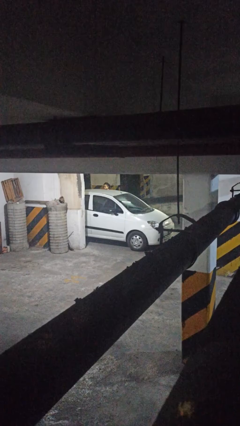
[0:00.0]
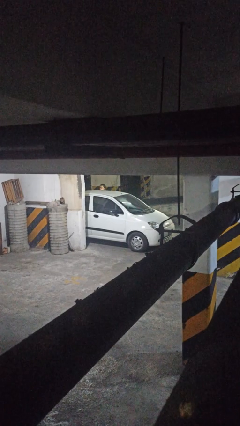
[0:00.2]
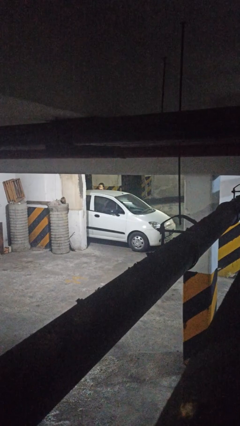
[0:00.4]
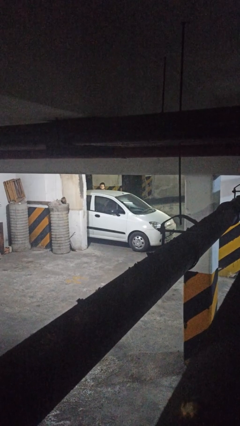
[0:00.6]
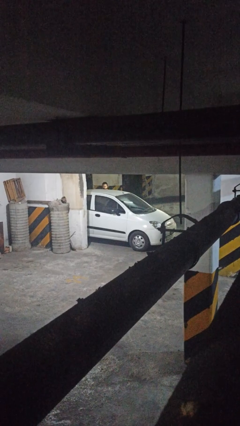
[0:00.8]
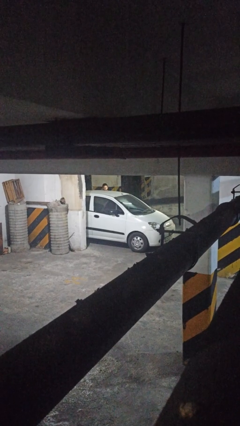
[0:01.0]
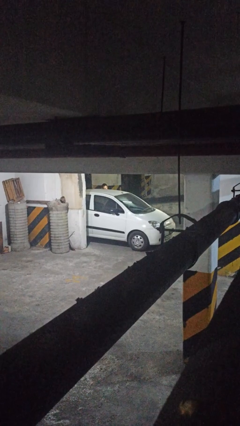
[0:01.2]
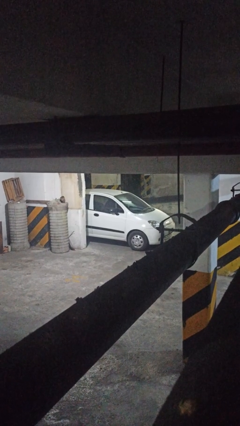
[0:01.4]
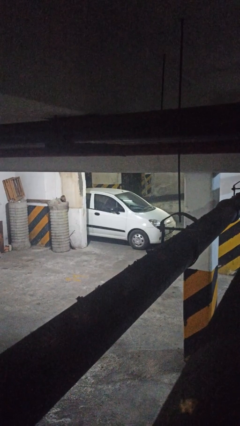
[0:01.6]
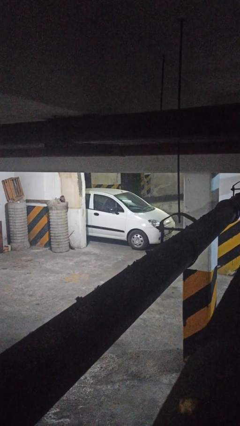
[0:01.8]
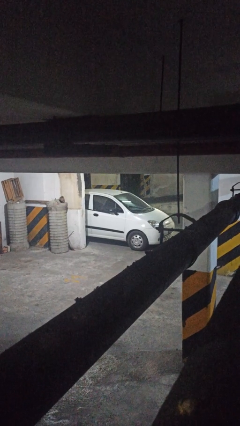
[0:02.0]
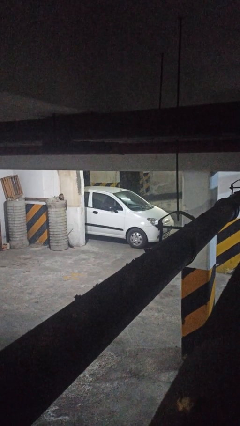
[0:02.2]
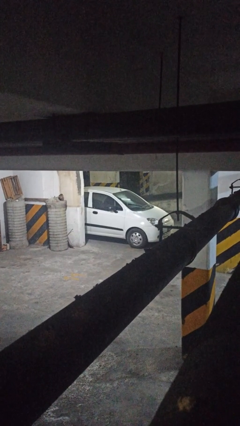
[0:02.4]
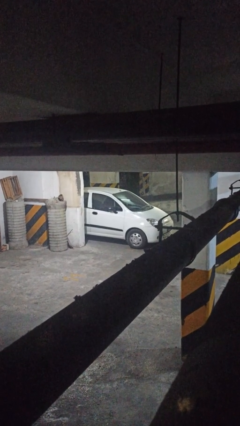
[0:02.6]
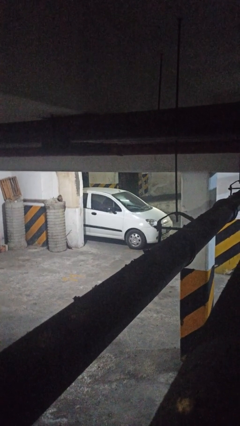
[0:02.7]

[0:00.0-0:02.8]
car picks up person

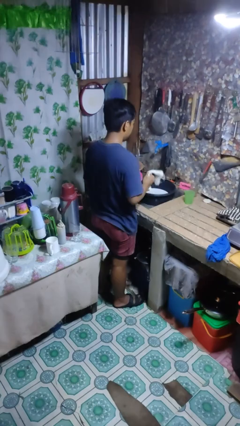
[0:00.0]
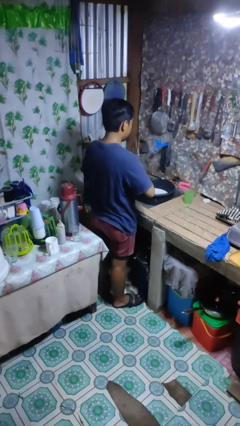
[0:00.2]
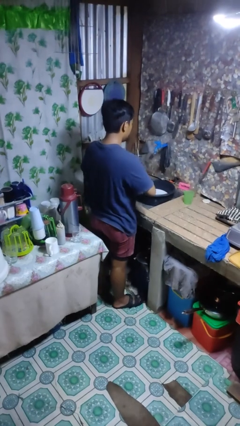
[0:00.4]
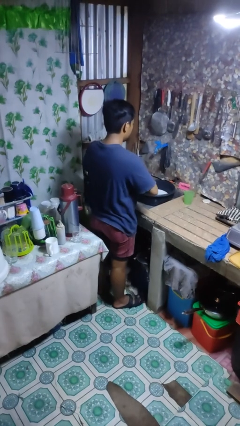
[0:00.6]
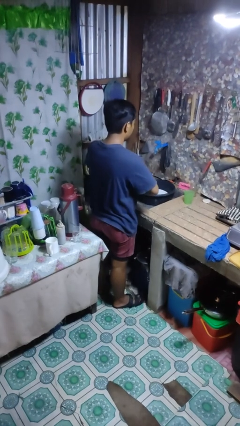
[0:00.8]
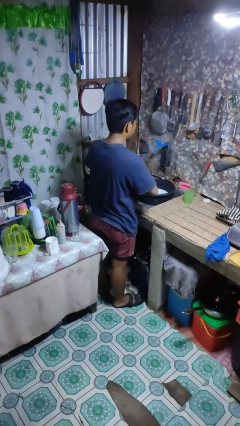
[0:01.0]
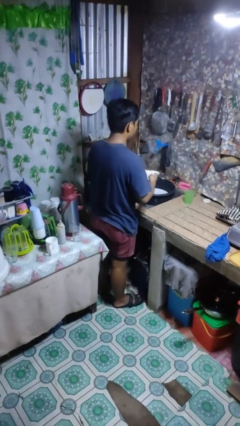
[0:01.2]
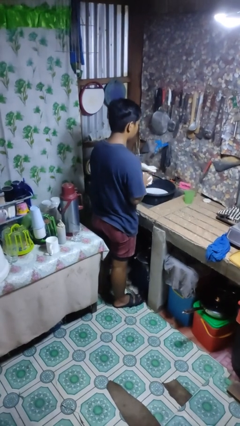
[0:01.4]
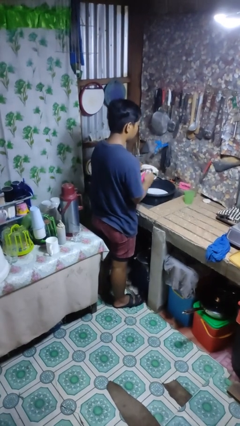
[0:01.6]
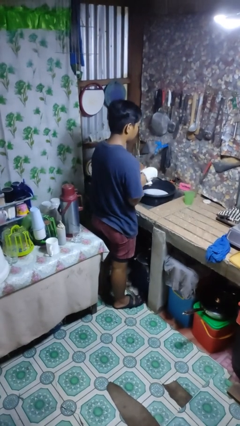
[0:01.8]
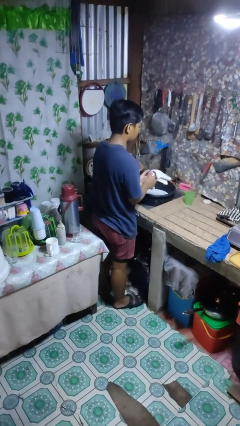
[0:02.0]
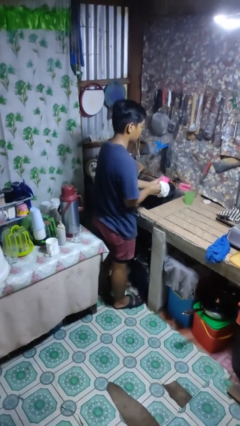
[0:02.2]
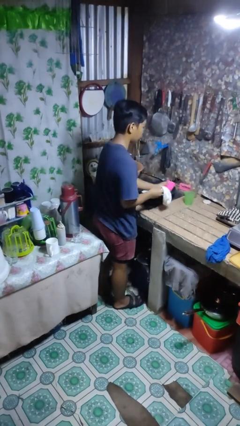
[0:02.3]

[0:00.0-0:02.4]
person dries dish

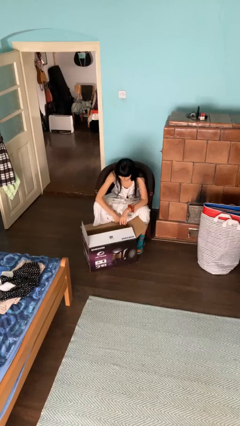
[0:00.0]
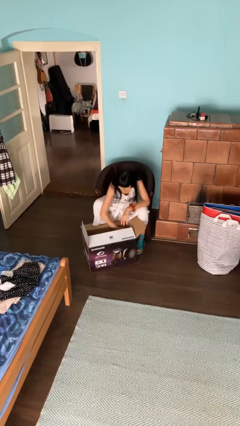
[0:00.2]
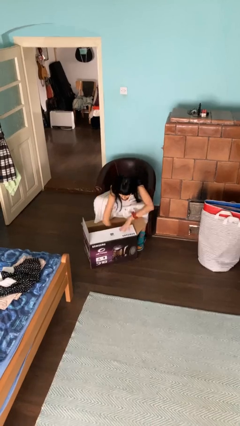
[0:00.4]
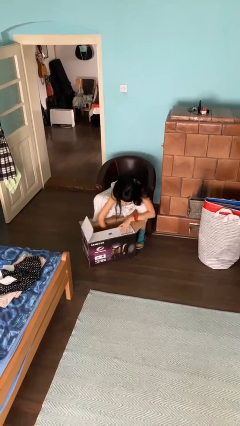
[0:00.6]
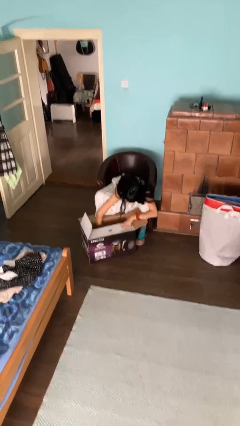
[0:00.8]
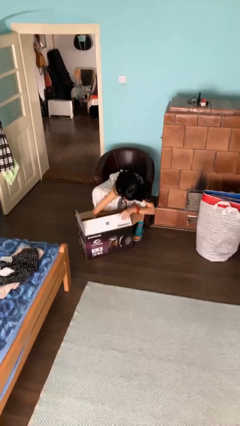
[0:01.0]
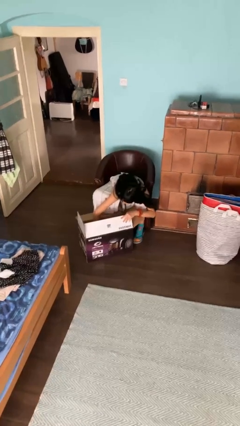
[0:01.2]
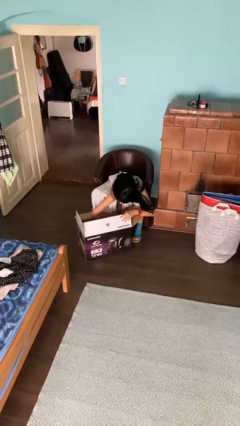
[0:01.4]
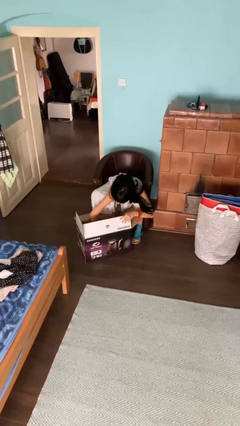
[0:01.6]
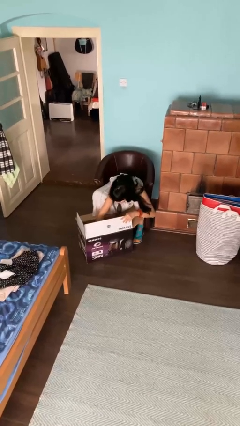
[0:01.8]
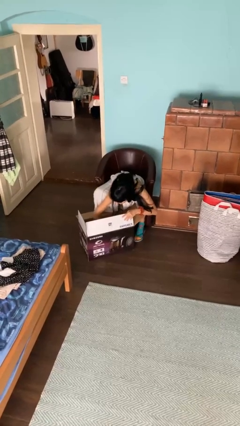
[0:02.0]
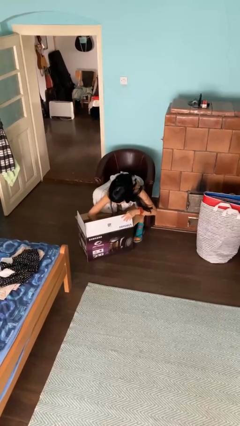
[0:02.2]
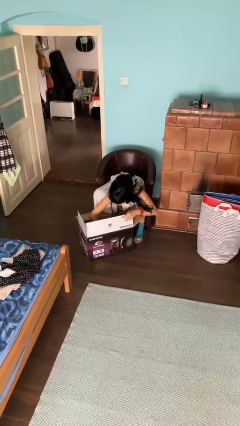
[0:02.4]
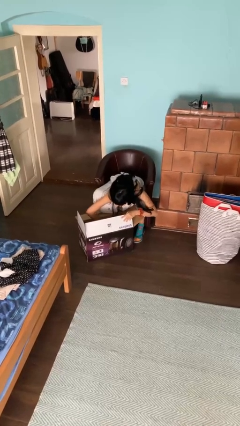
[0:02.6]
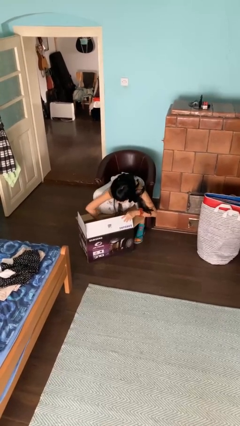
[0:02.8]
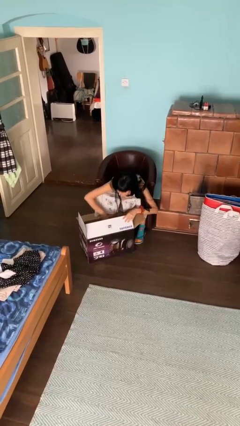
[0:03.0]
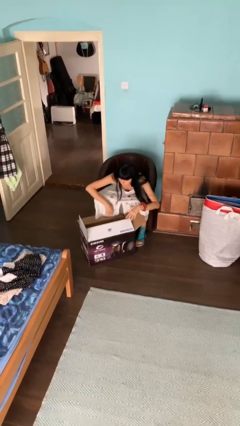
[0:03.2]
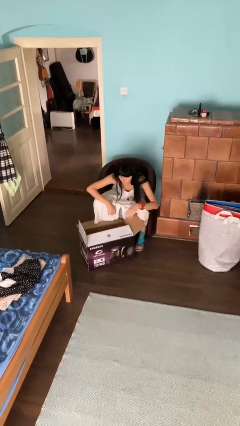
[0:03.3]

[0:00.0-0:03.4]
person searches in box

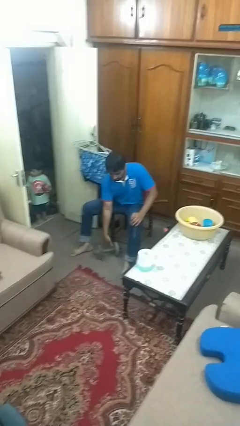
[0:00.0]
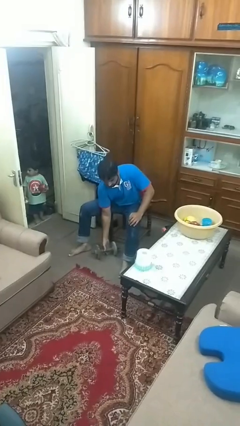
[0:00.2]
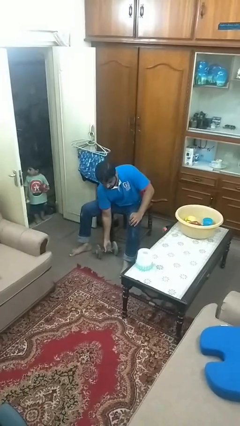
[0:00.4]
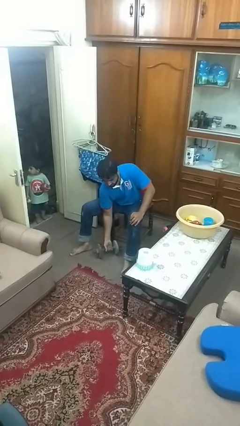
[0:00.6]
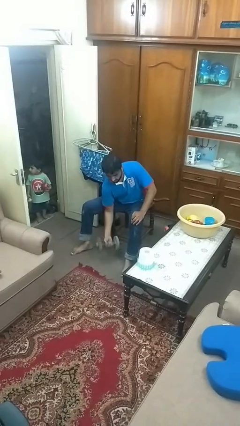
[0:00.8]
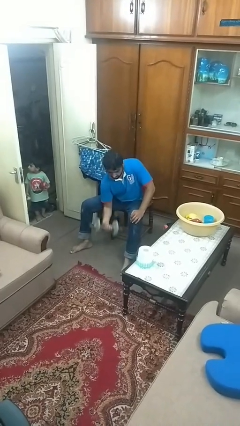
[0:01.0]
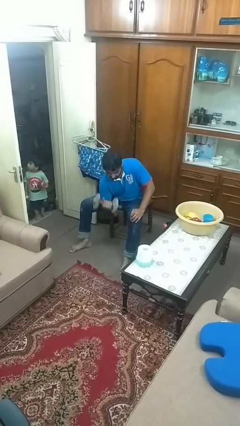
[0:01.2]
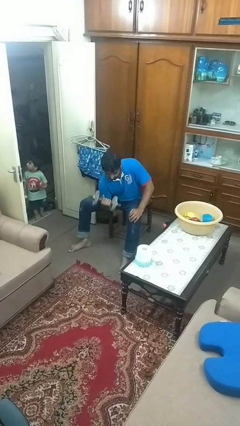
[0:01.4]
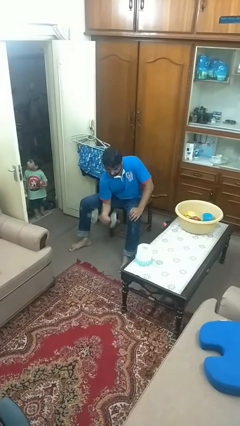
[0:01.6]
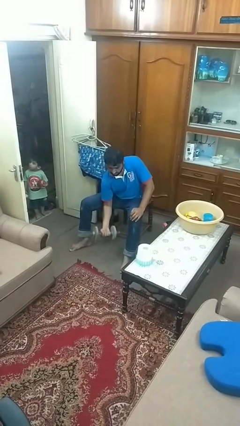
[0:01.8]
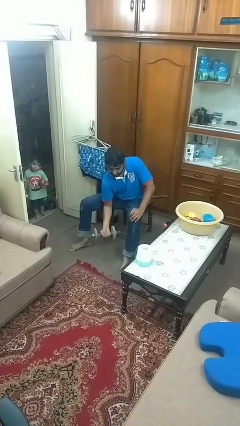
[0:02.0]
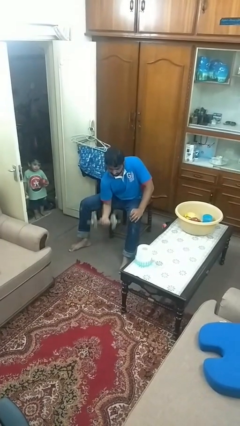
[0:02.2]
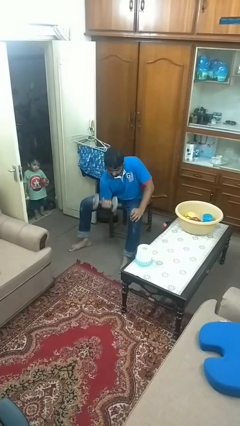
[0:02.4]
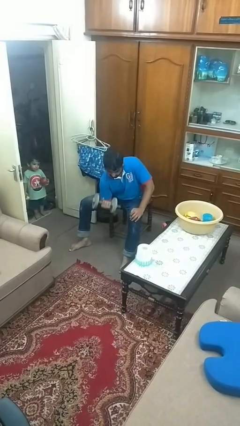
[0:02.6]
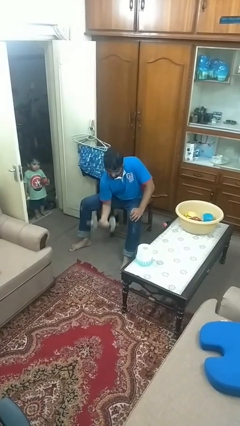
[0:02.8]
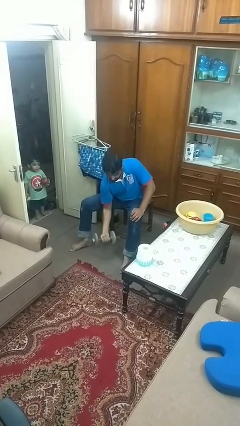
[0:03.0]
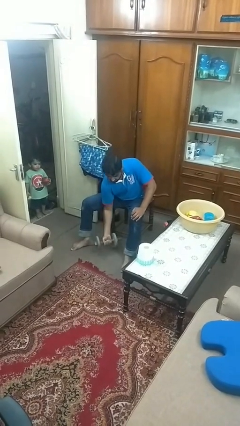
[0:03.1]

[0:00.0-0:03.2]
person lifts dumbbells

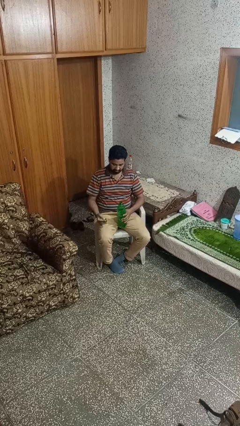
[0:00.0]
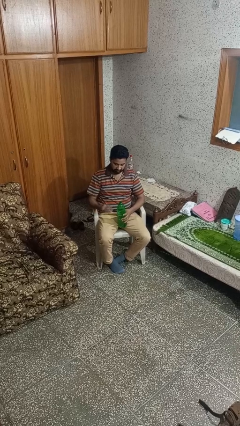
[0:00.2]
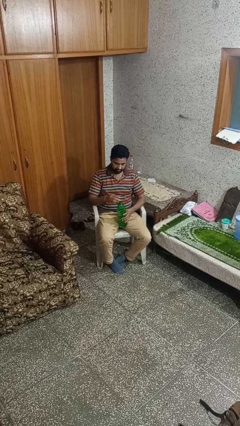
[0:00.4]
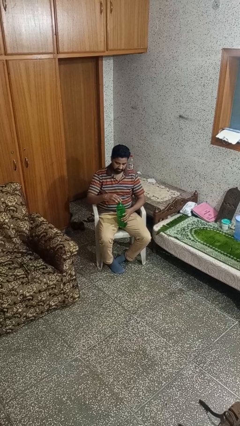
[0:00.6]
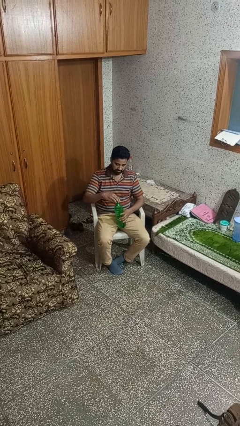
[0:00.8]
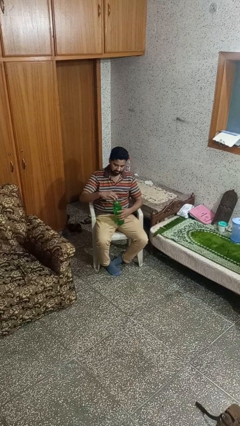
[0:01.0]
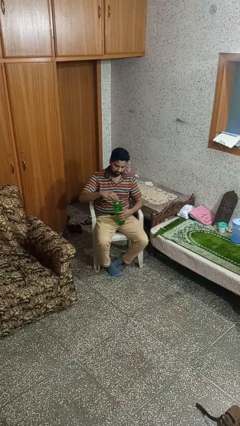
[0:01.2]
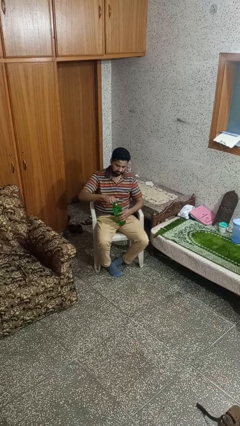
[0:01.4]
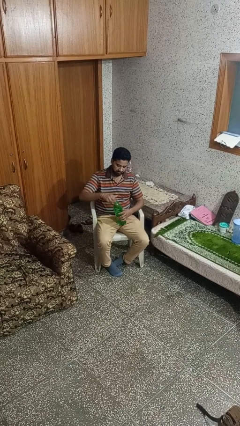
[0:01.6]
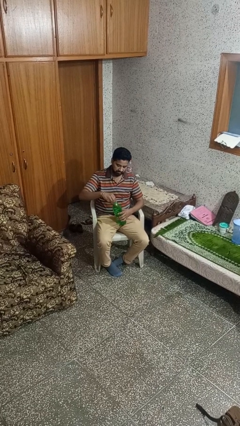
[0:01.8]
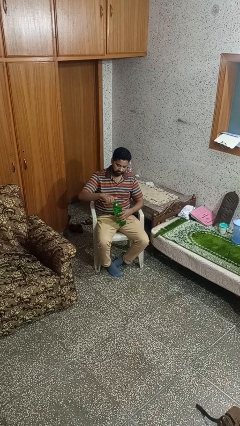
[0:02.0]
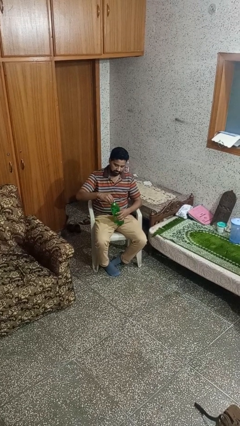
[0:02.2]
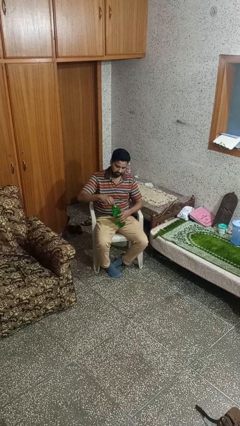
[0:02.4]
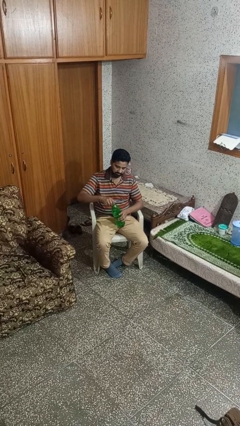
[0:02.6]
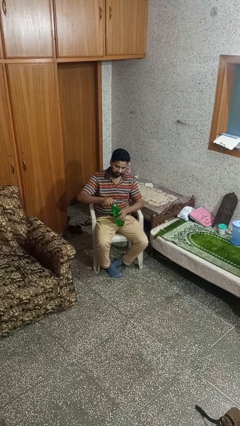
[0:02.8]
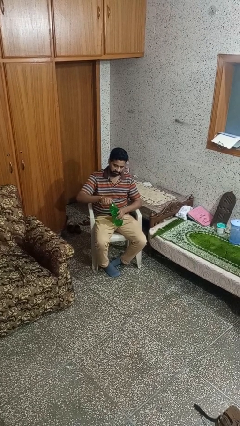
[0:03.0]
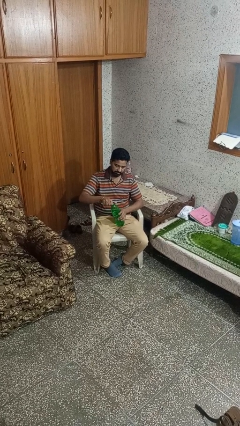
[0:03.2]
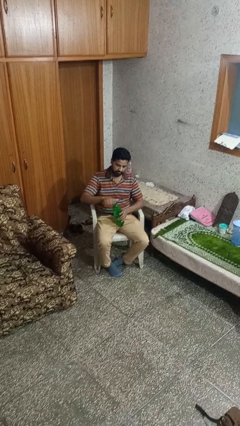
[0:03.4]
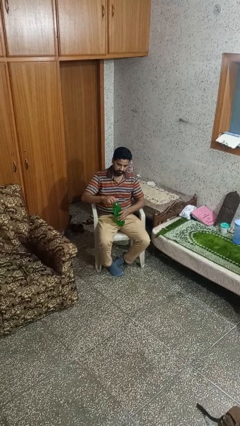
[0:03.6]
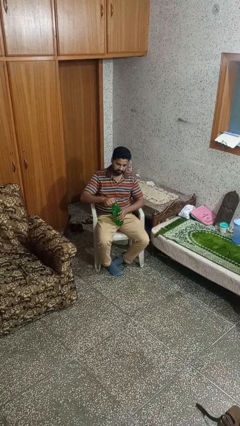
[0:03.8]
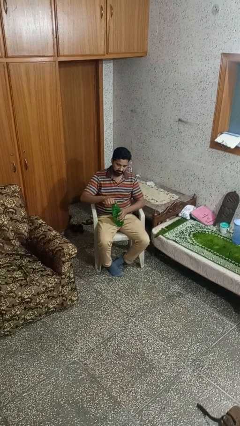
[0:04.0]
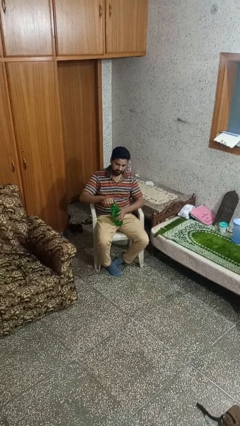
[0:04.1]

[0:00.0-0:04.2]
person screws lid to bottle

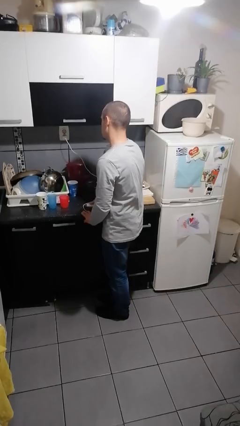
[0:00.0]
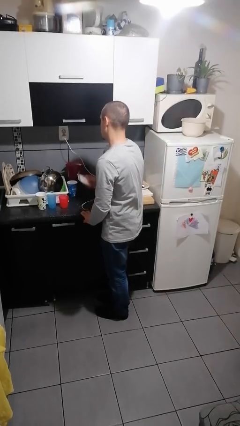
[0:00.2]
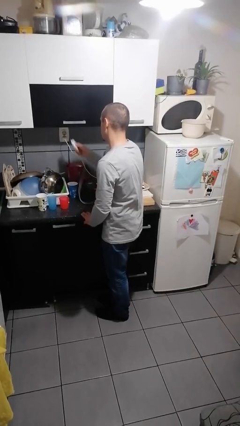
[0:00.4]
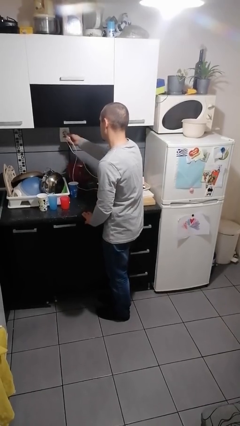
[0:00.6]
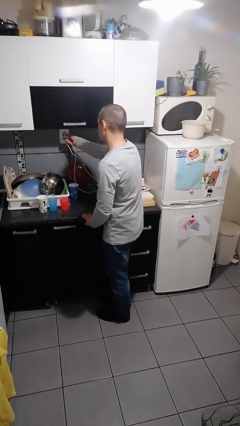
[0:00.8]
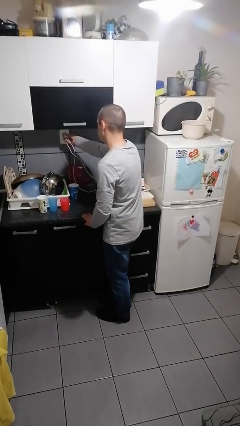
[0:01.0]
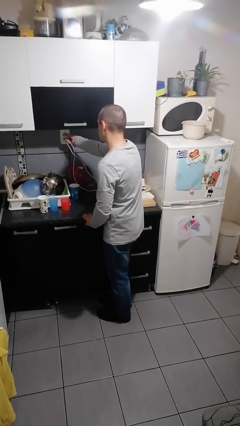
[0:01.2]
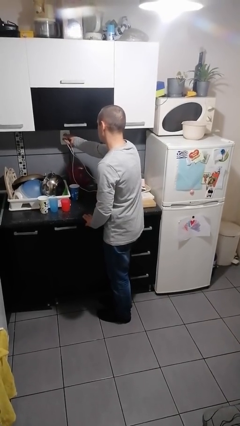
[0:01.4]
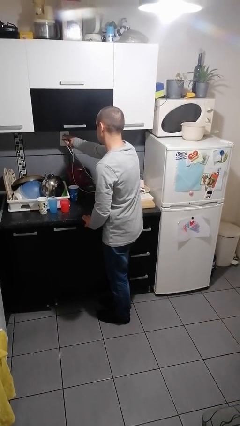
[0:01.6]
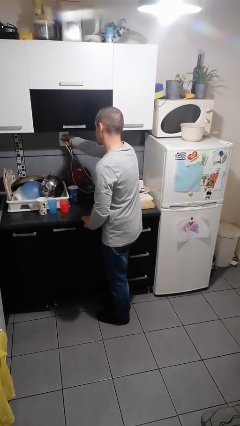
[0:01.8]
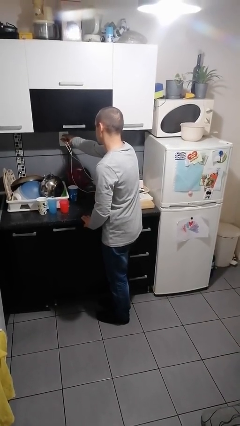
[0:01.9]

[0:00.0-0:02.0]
person plugs into electrical socket
